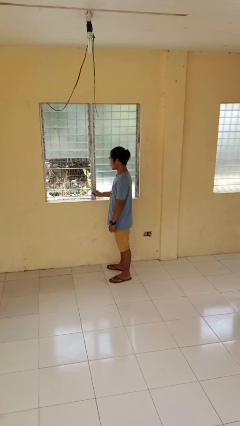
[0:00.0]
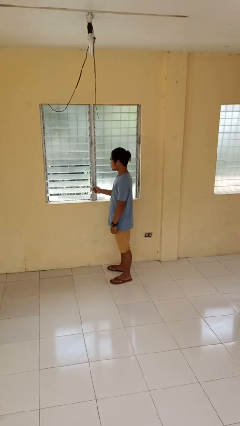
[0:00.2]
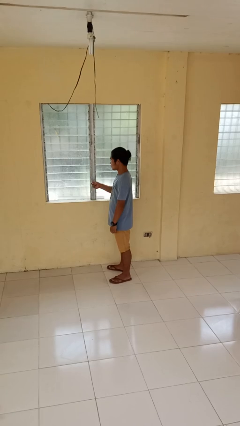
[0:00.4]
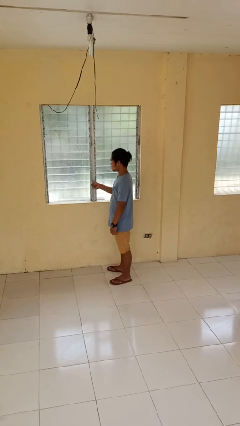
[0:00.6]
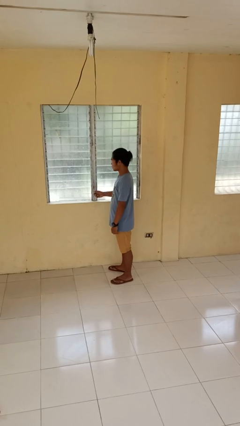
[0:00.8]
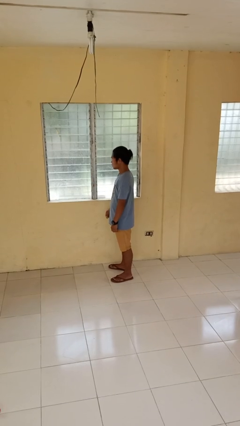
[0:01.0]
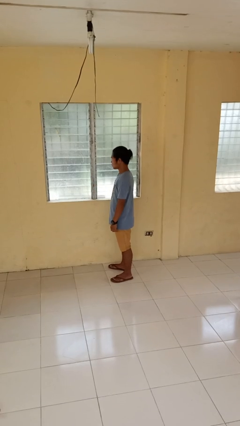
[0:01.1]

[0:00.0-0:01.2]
person closes home window

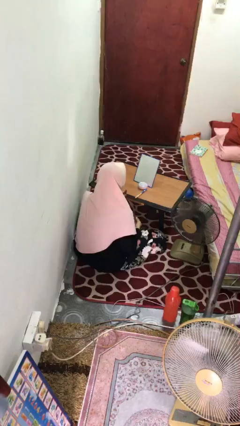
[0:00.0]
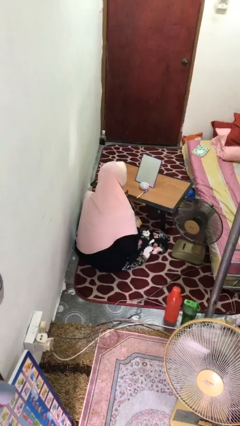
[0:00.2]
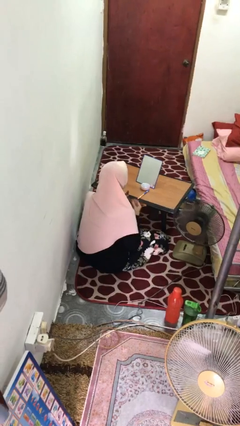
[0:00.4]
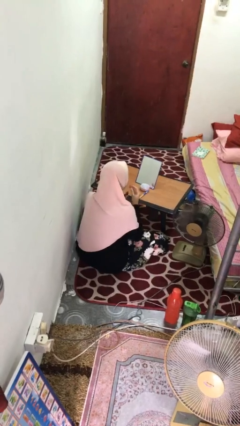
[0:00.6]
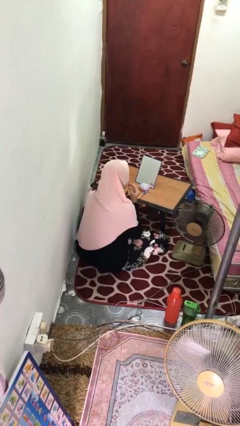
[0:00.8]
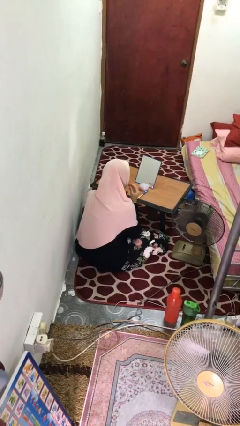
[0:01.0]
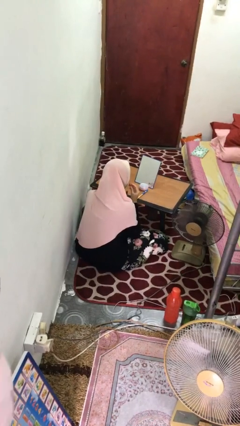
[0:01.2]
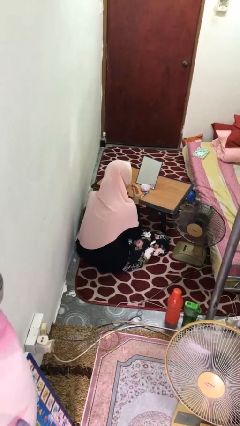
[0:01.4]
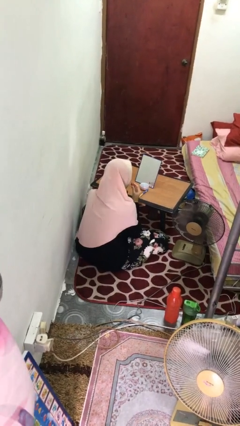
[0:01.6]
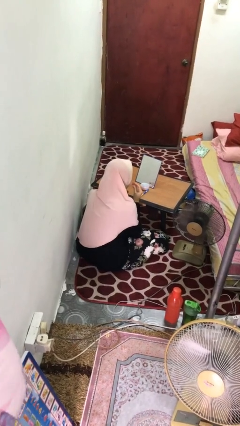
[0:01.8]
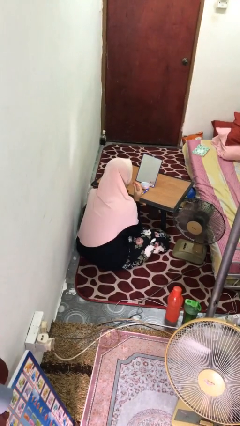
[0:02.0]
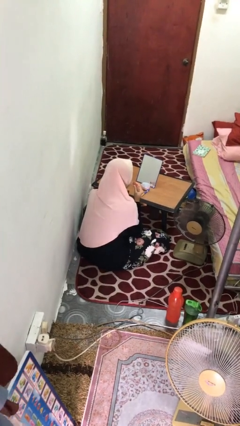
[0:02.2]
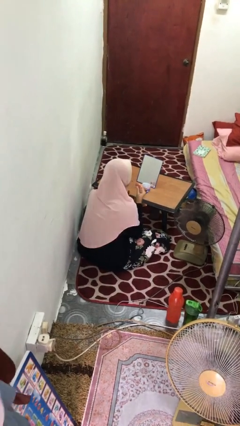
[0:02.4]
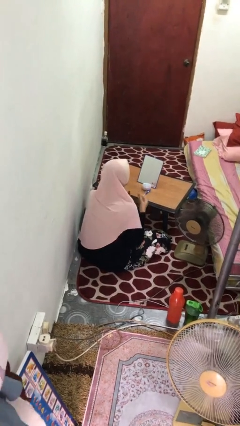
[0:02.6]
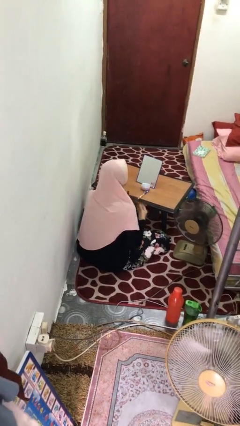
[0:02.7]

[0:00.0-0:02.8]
person applies lip makeup

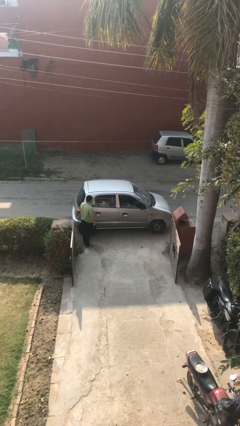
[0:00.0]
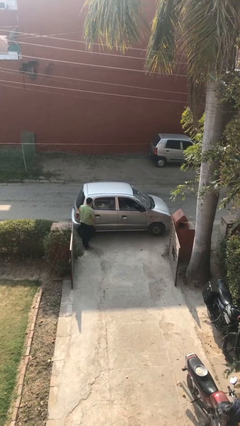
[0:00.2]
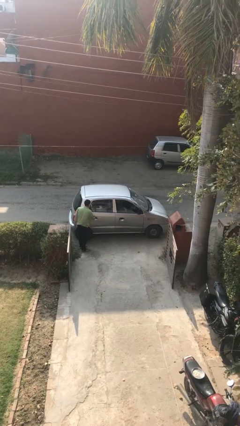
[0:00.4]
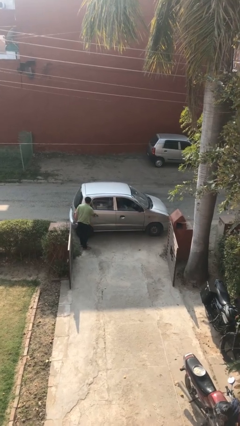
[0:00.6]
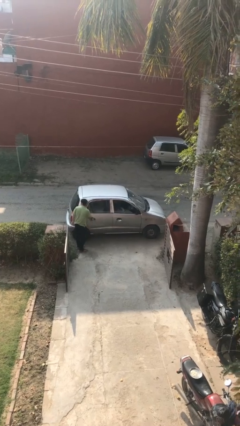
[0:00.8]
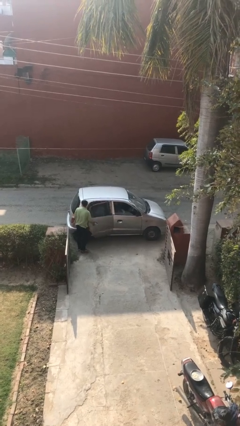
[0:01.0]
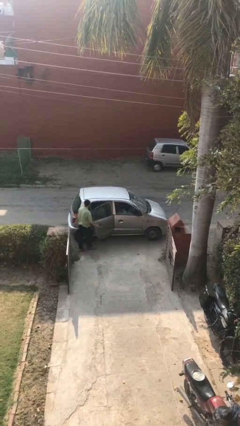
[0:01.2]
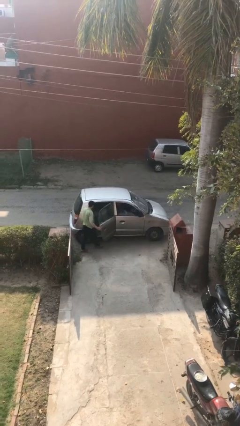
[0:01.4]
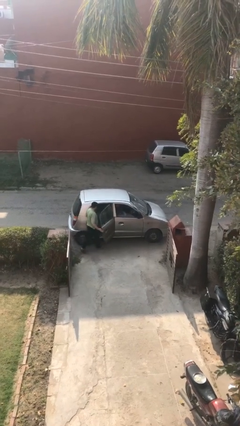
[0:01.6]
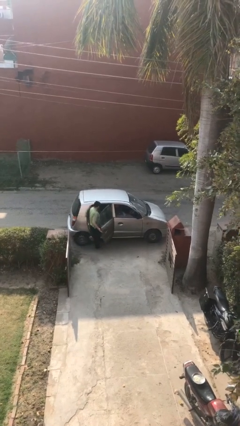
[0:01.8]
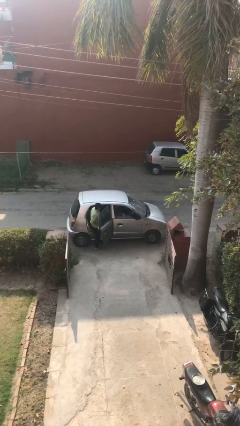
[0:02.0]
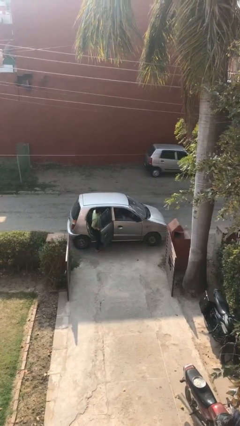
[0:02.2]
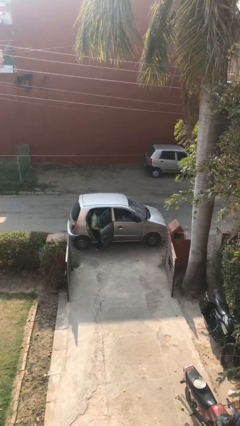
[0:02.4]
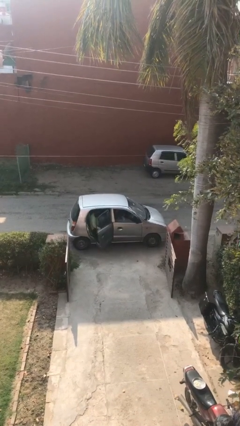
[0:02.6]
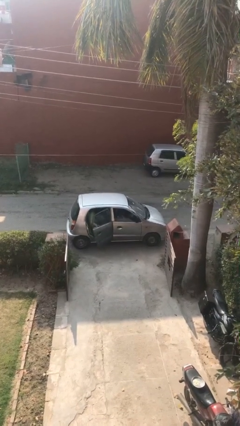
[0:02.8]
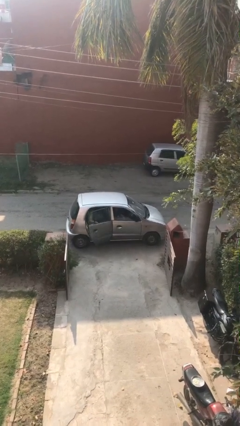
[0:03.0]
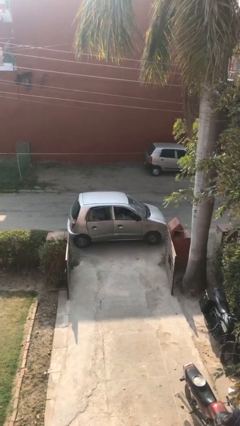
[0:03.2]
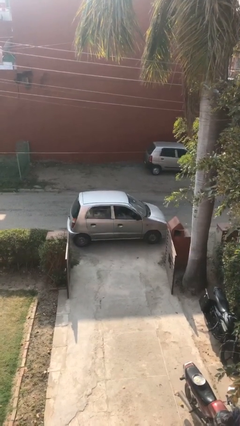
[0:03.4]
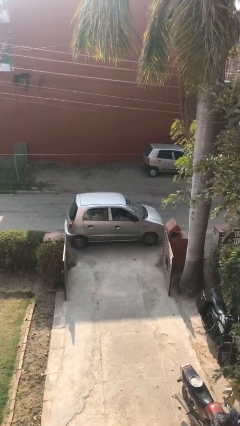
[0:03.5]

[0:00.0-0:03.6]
car picks up person

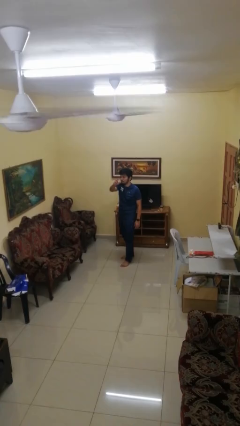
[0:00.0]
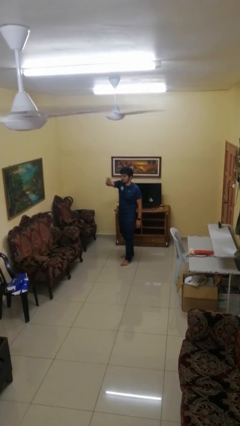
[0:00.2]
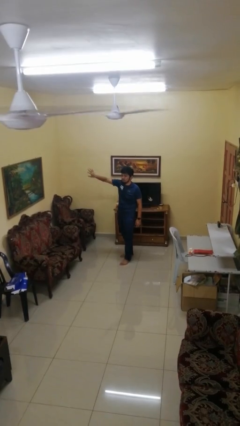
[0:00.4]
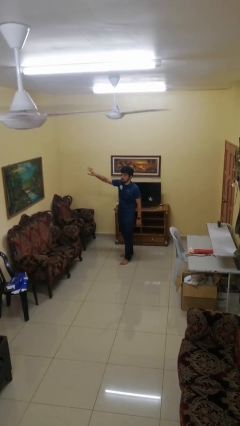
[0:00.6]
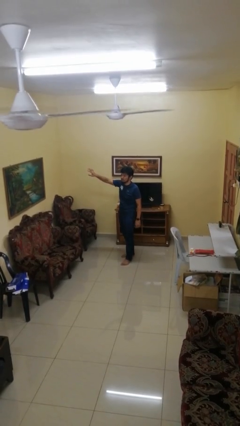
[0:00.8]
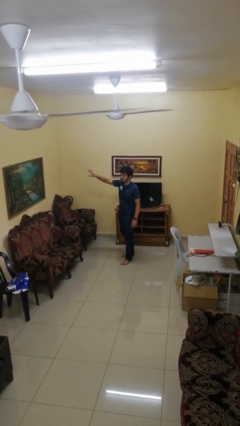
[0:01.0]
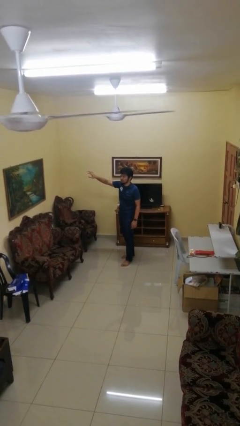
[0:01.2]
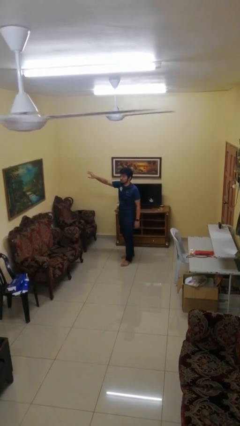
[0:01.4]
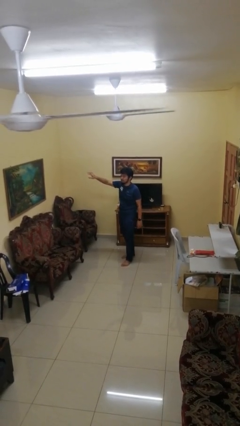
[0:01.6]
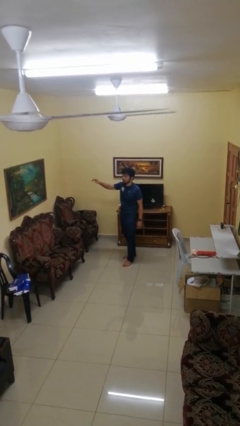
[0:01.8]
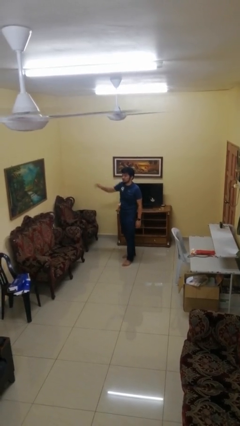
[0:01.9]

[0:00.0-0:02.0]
person gestures swipe right

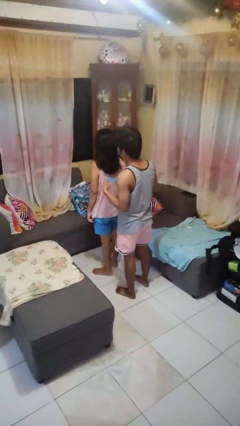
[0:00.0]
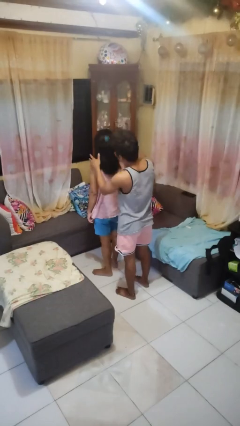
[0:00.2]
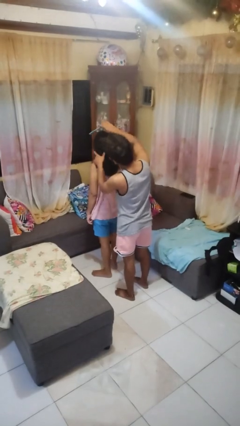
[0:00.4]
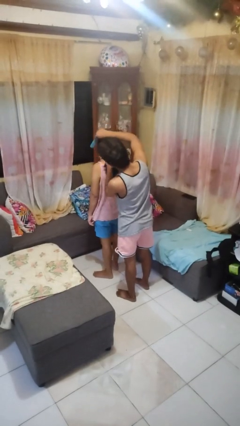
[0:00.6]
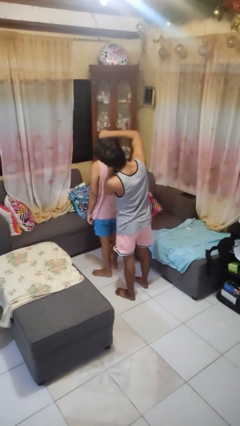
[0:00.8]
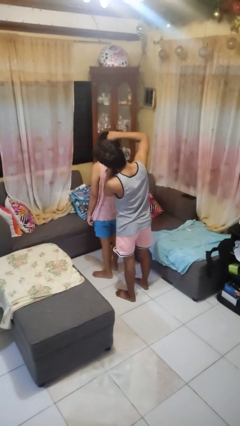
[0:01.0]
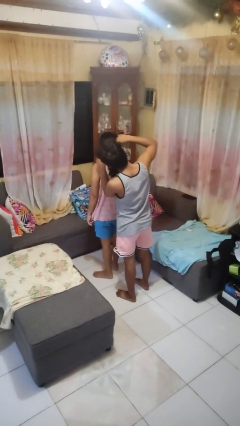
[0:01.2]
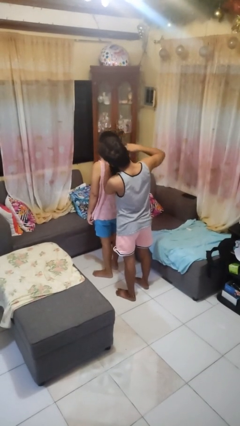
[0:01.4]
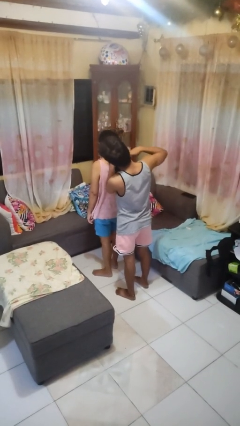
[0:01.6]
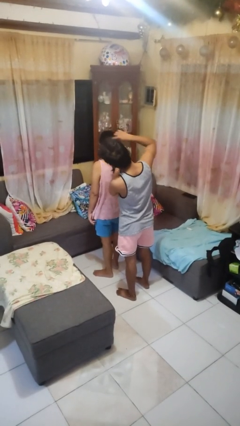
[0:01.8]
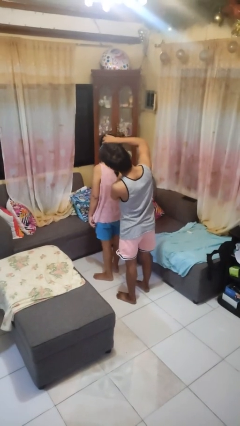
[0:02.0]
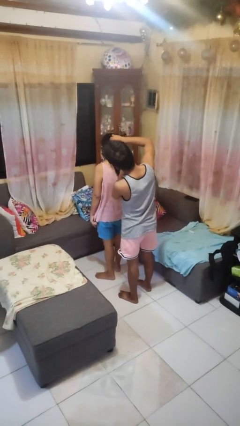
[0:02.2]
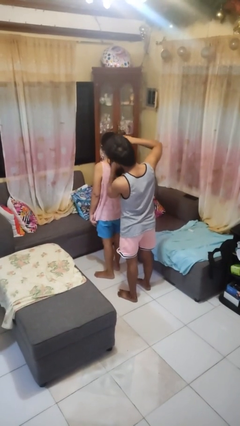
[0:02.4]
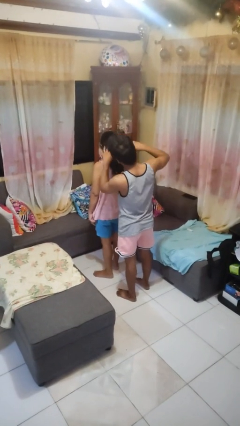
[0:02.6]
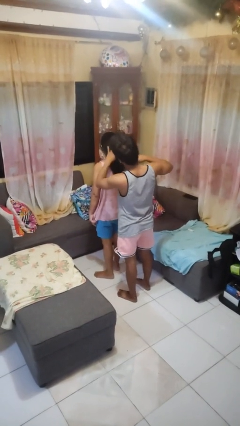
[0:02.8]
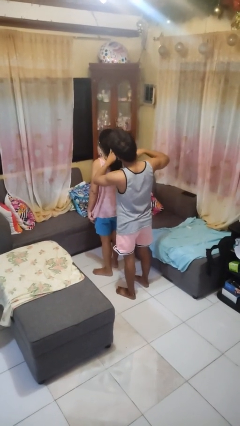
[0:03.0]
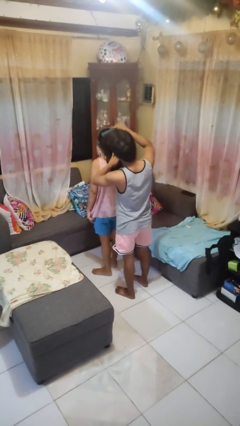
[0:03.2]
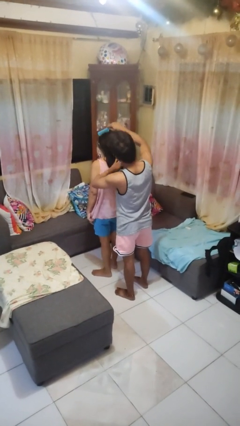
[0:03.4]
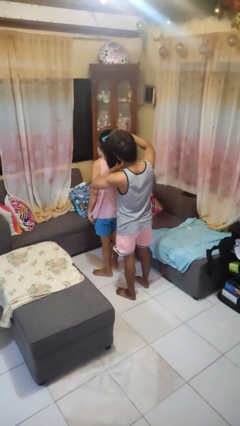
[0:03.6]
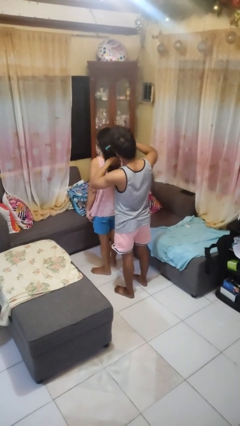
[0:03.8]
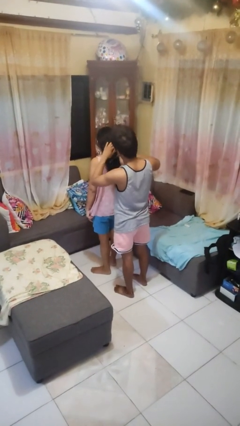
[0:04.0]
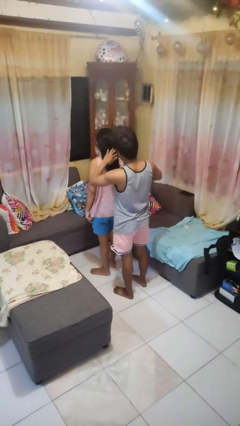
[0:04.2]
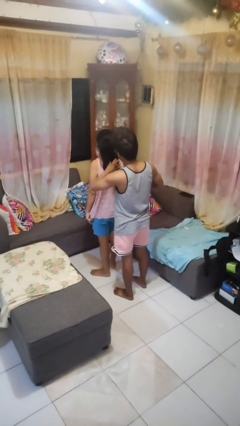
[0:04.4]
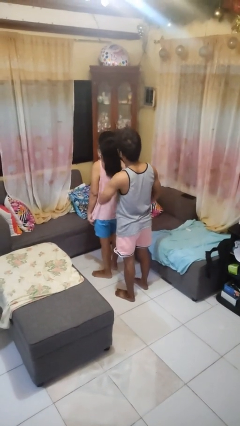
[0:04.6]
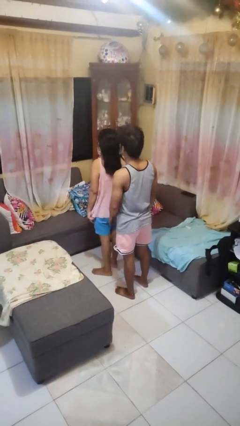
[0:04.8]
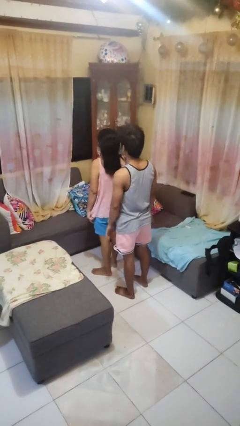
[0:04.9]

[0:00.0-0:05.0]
person brushes hair of person

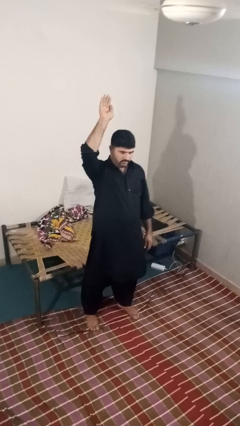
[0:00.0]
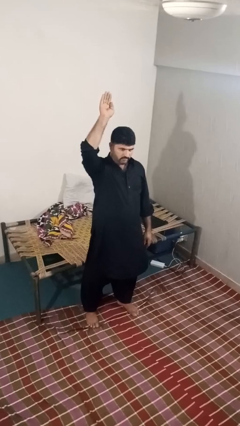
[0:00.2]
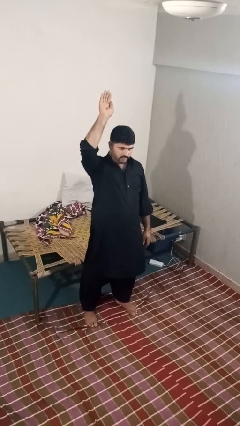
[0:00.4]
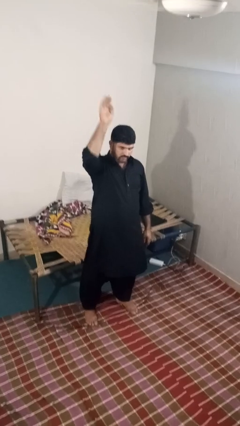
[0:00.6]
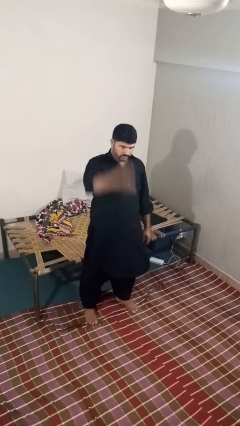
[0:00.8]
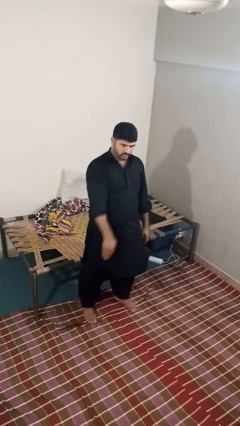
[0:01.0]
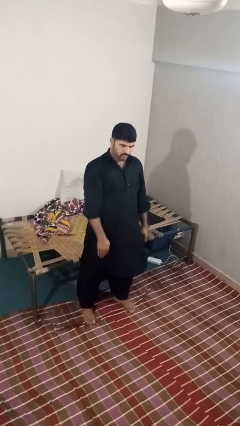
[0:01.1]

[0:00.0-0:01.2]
person gestures swipe down

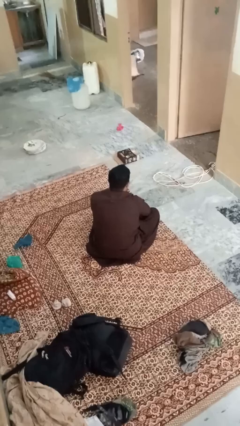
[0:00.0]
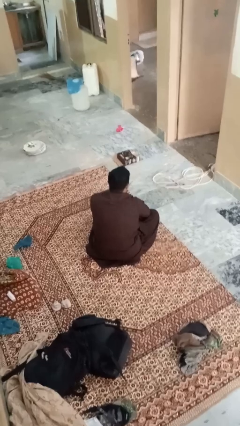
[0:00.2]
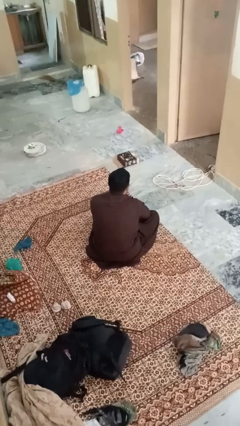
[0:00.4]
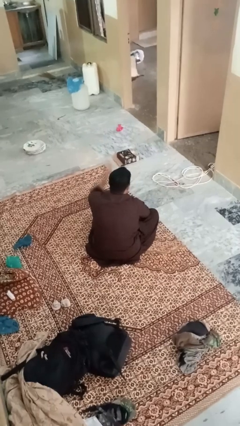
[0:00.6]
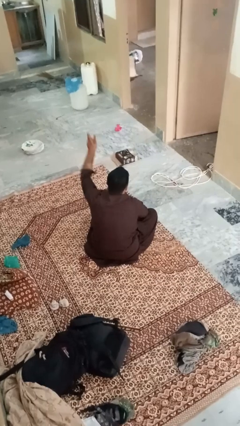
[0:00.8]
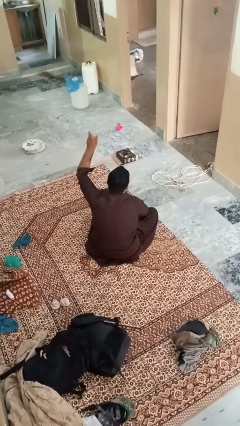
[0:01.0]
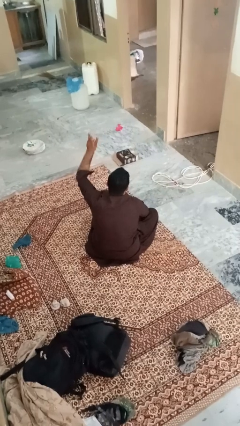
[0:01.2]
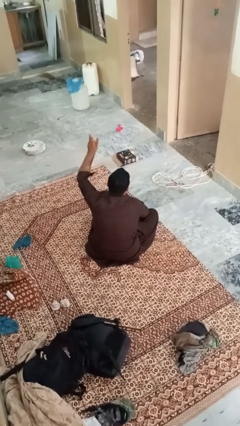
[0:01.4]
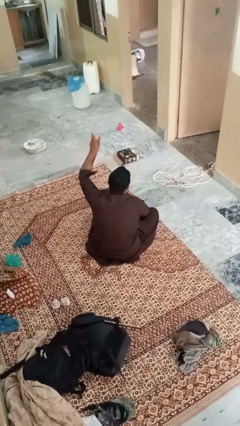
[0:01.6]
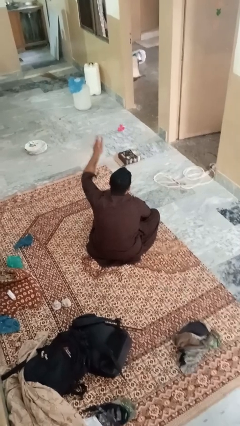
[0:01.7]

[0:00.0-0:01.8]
person gestures number three
